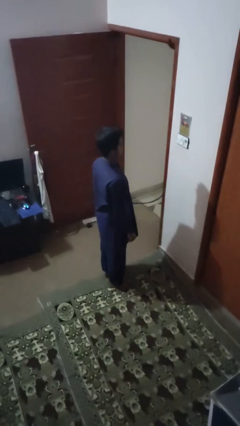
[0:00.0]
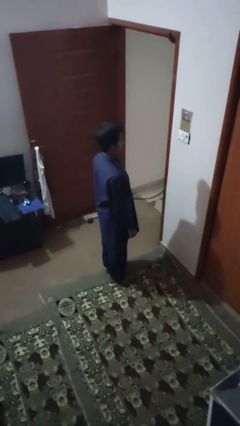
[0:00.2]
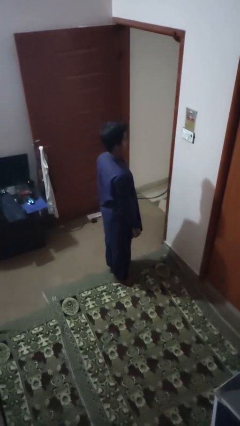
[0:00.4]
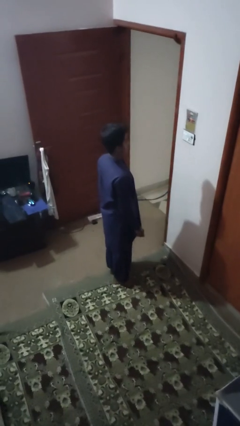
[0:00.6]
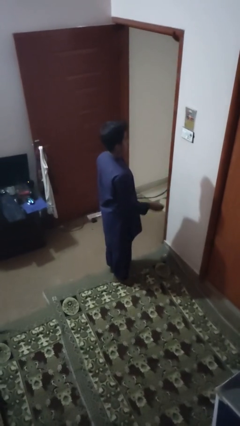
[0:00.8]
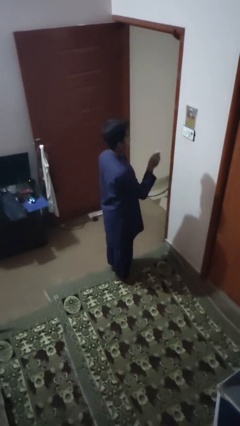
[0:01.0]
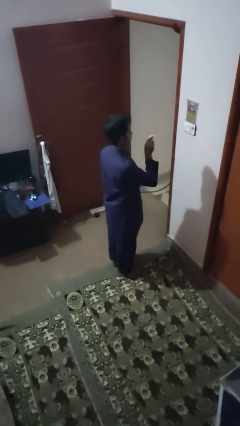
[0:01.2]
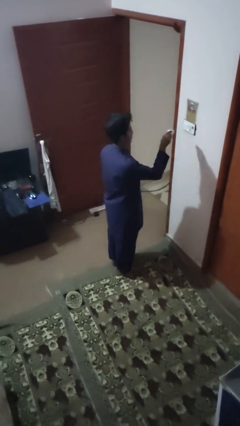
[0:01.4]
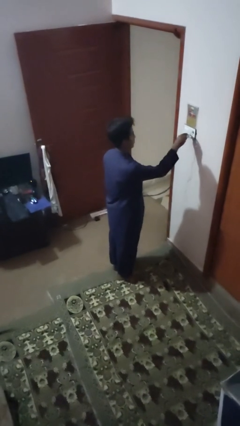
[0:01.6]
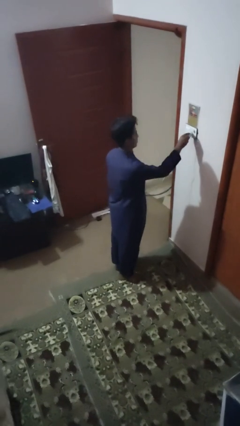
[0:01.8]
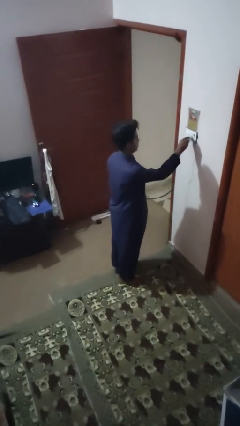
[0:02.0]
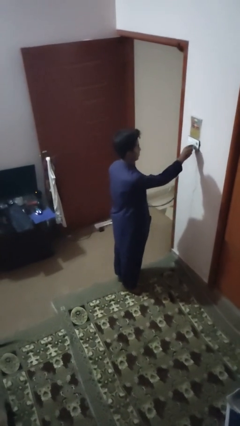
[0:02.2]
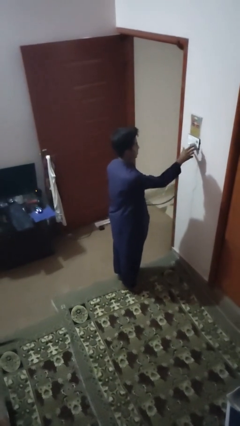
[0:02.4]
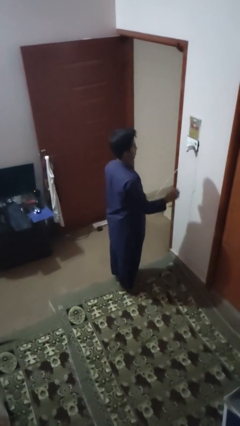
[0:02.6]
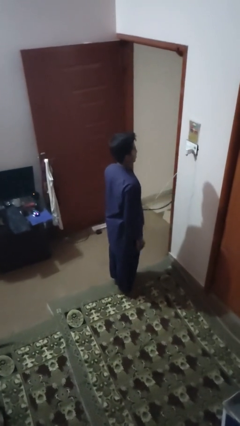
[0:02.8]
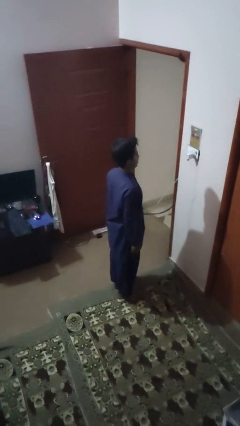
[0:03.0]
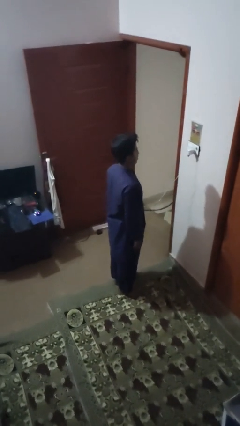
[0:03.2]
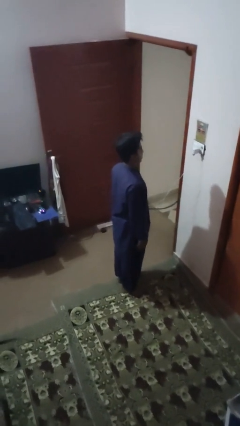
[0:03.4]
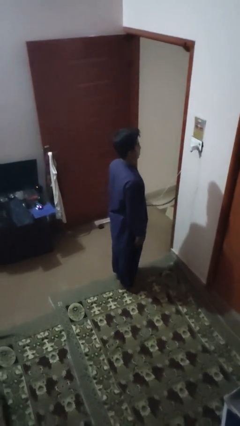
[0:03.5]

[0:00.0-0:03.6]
person plugs into electrical socket

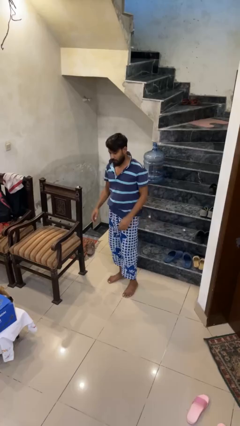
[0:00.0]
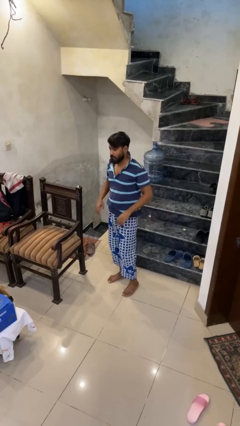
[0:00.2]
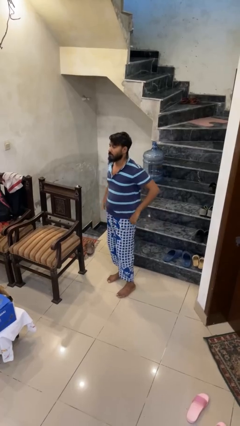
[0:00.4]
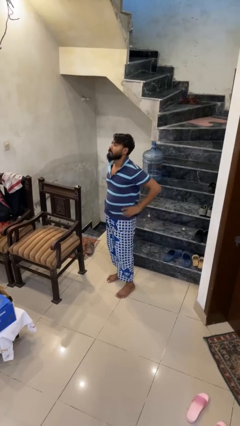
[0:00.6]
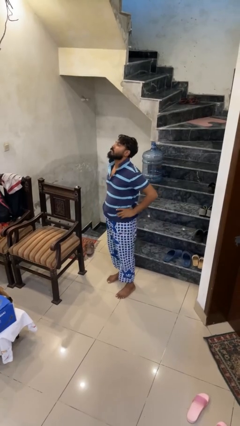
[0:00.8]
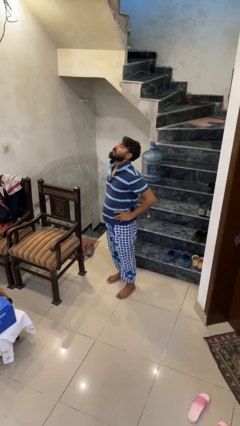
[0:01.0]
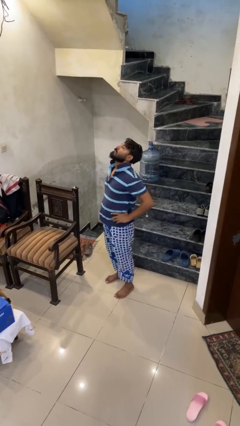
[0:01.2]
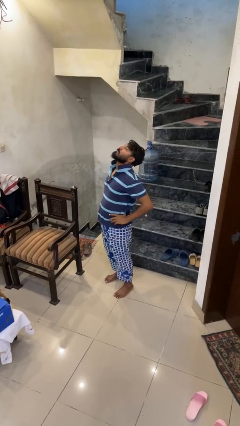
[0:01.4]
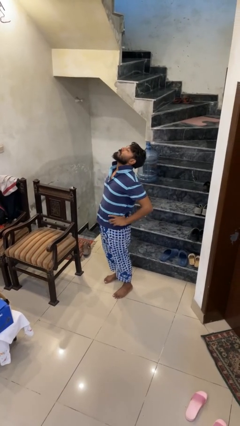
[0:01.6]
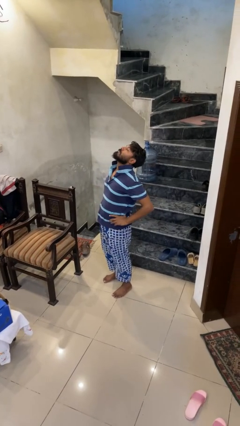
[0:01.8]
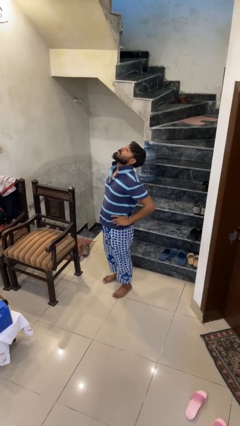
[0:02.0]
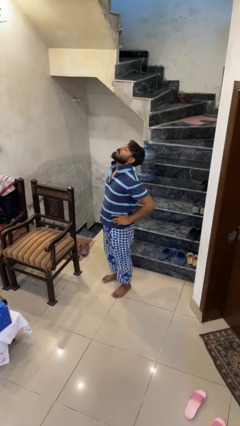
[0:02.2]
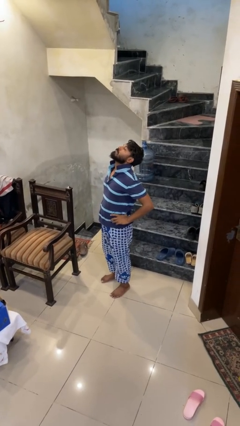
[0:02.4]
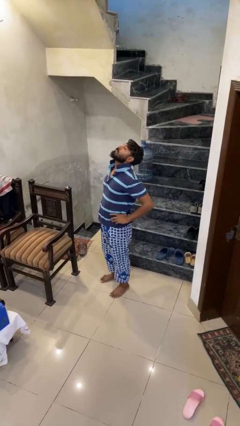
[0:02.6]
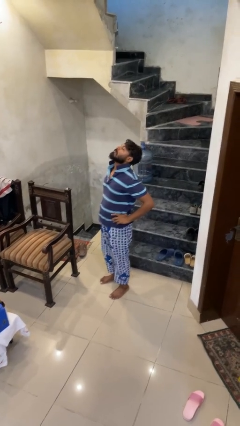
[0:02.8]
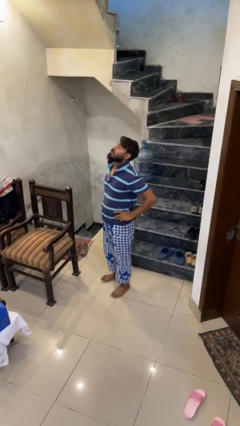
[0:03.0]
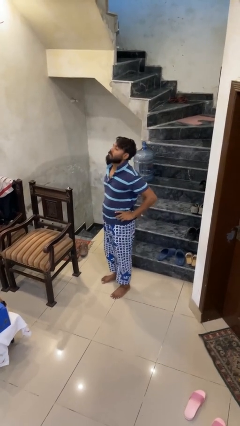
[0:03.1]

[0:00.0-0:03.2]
person stretches back

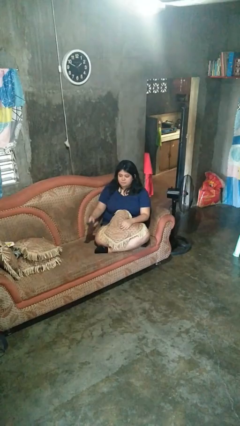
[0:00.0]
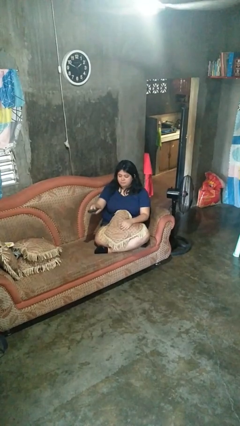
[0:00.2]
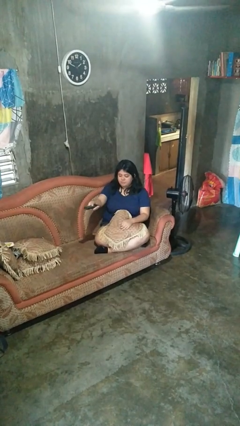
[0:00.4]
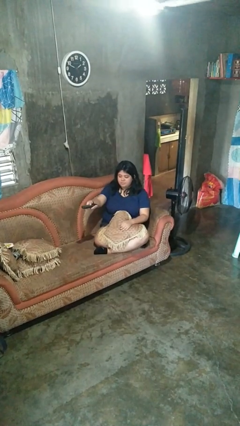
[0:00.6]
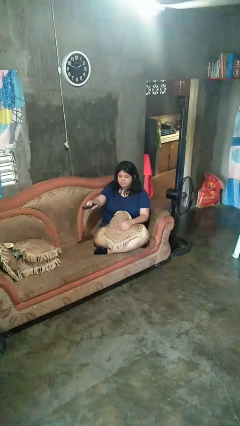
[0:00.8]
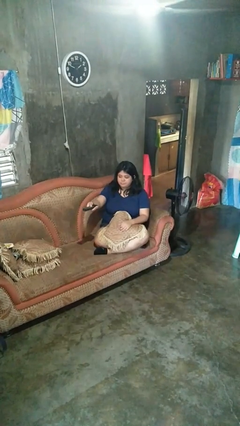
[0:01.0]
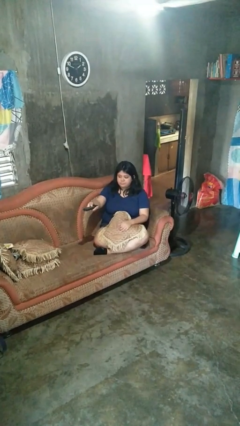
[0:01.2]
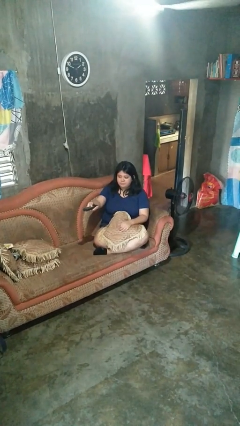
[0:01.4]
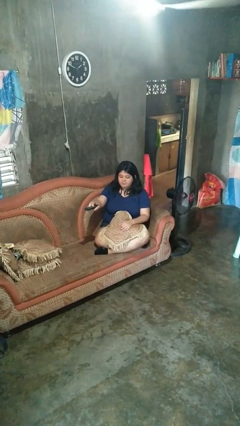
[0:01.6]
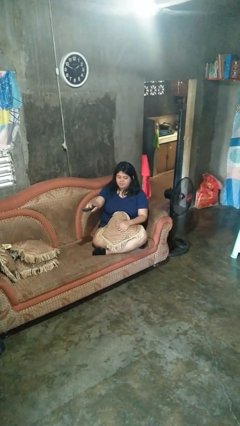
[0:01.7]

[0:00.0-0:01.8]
person uses television remote

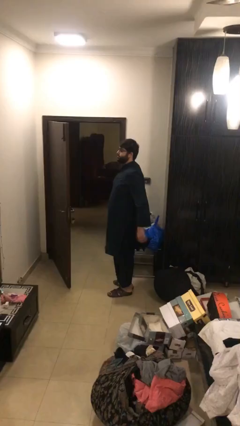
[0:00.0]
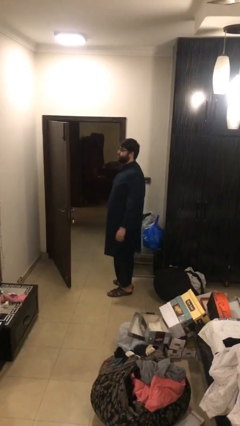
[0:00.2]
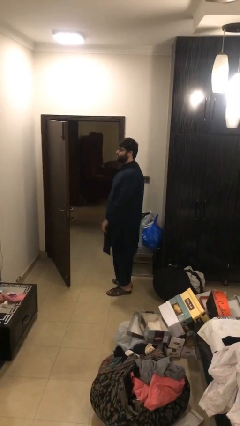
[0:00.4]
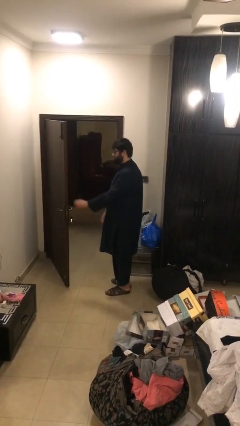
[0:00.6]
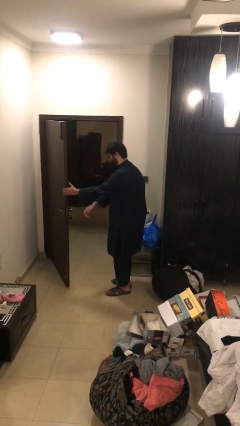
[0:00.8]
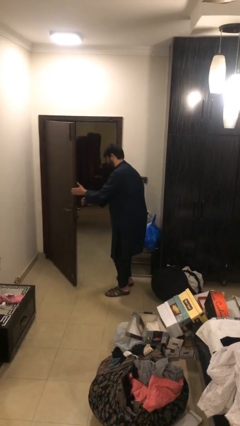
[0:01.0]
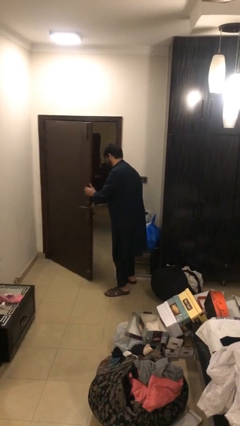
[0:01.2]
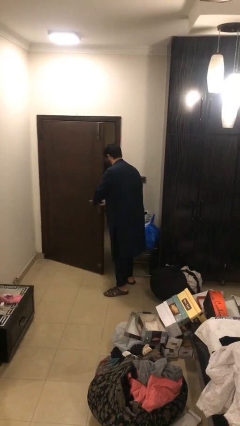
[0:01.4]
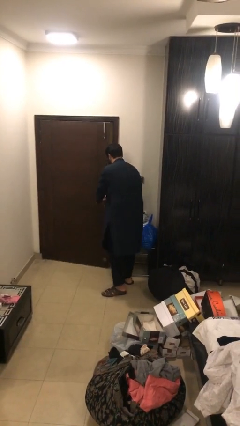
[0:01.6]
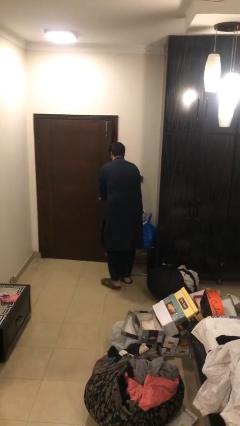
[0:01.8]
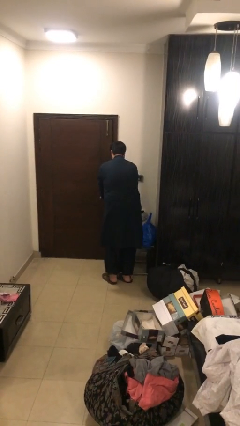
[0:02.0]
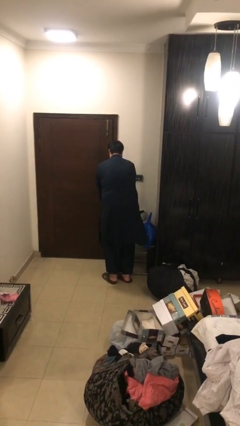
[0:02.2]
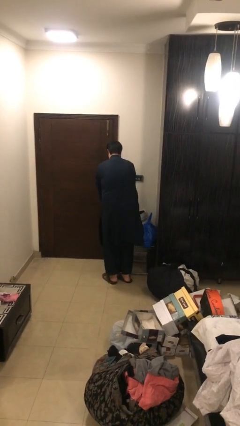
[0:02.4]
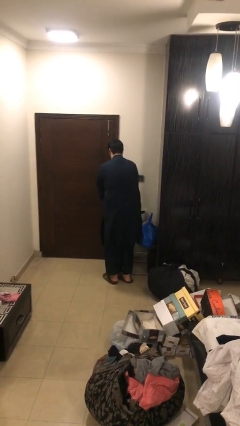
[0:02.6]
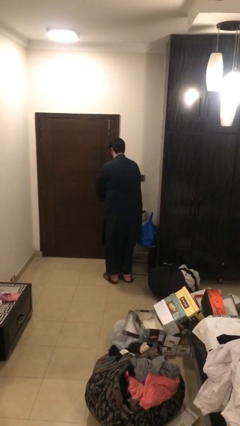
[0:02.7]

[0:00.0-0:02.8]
person closes facility door

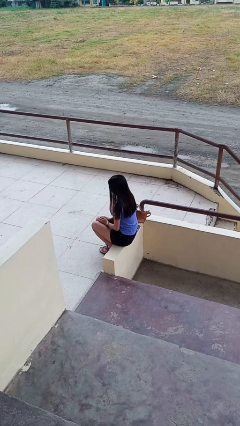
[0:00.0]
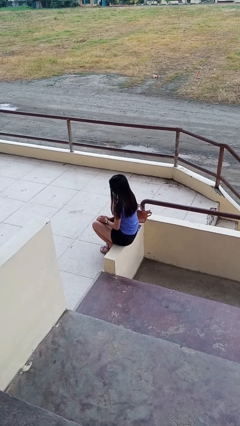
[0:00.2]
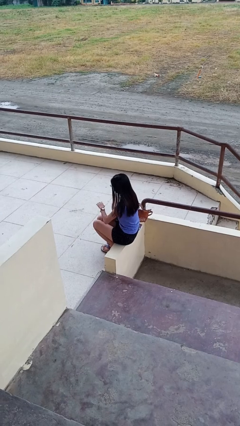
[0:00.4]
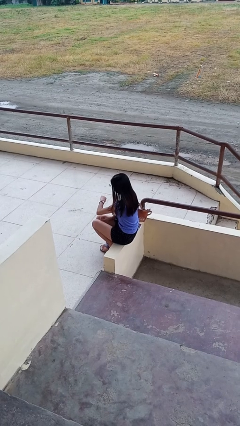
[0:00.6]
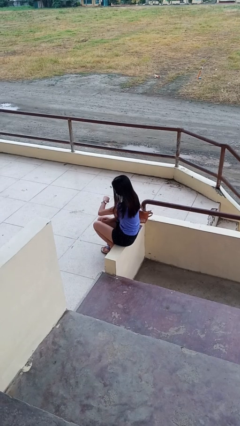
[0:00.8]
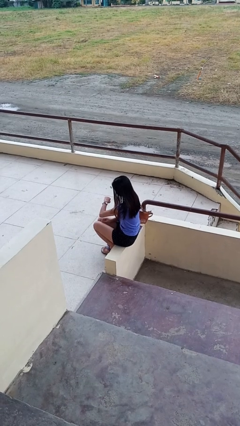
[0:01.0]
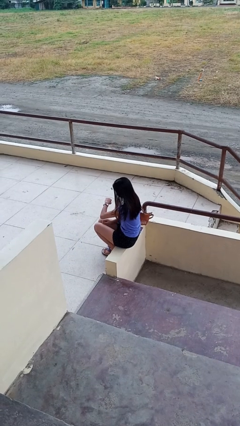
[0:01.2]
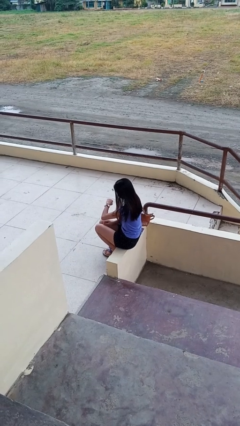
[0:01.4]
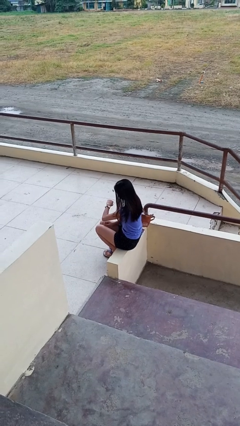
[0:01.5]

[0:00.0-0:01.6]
person looks at wristwatch

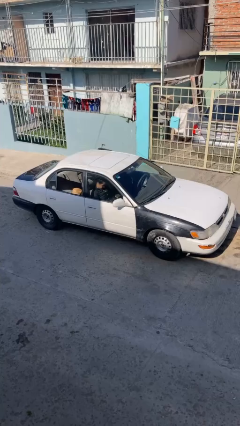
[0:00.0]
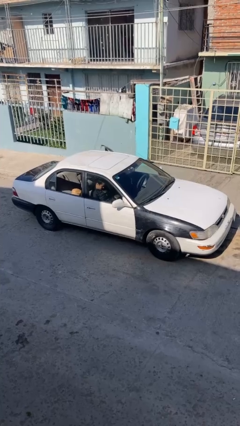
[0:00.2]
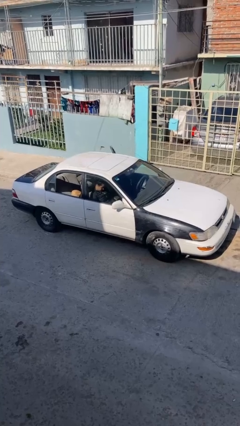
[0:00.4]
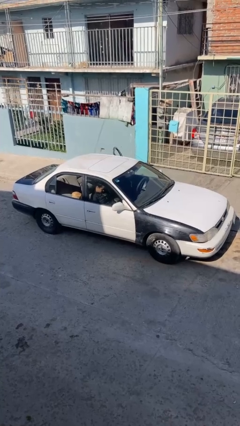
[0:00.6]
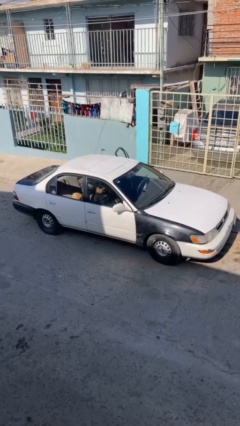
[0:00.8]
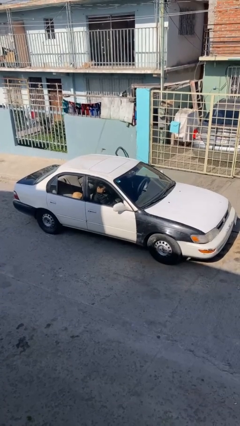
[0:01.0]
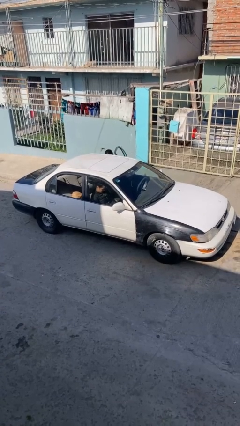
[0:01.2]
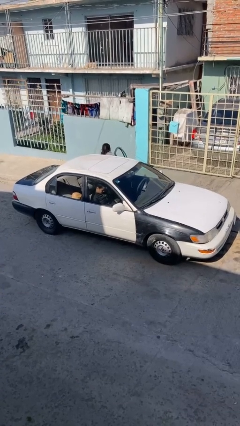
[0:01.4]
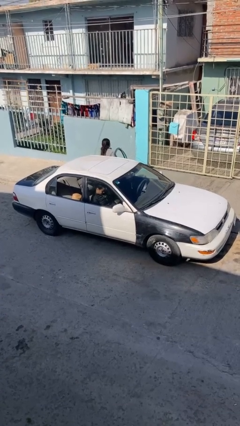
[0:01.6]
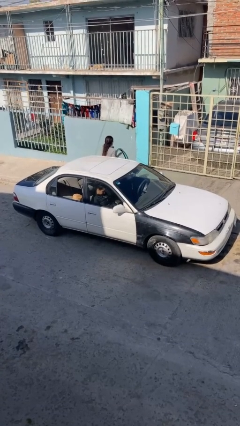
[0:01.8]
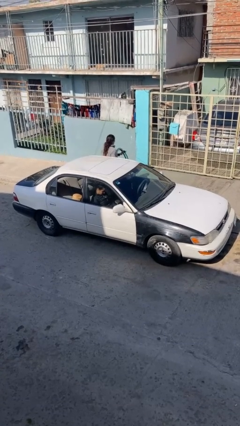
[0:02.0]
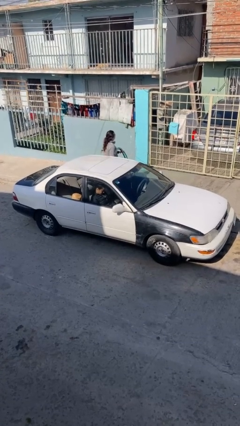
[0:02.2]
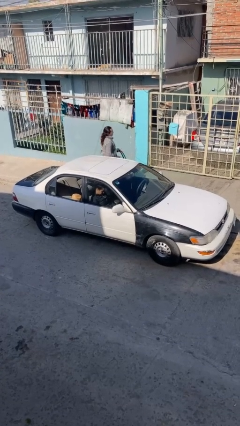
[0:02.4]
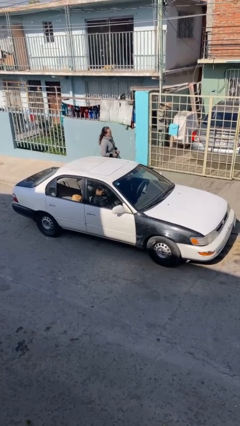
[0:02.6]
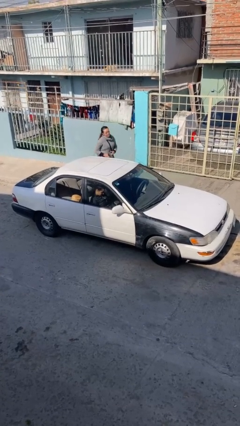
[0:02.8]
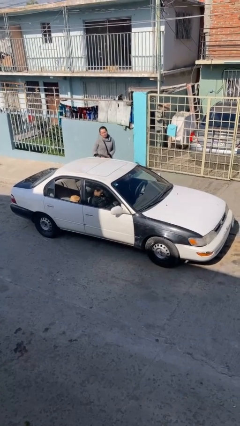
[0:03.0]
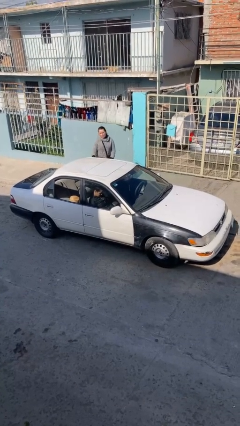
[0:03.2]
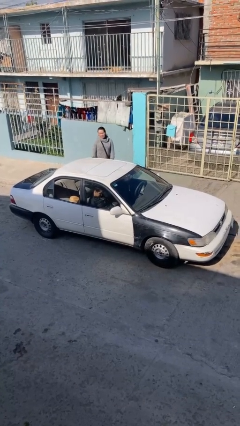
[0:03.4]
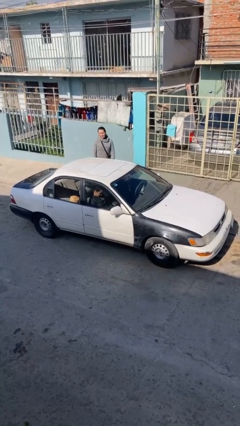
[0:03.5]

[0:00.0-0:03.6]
car drops off person

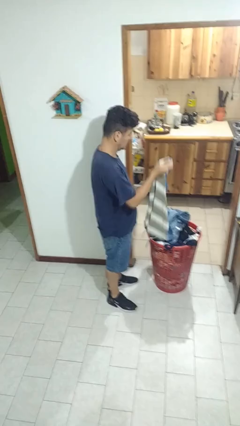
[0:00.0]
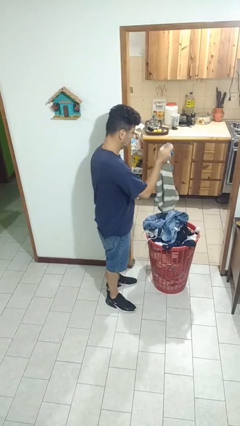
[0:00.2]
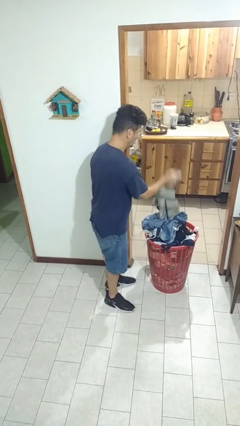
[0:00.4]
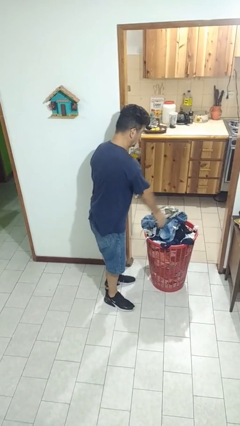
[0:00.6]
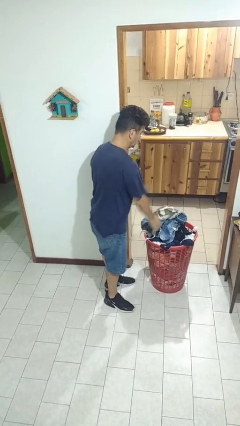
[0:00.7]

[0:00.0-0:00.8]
person puts object into basket
